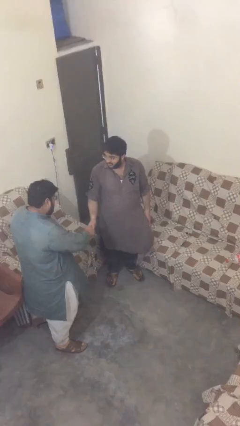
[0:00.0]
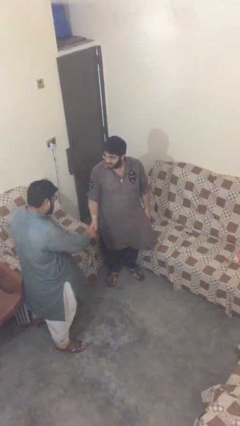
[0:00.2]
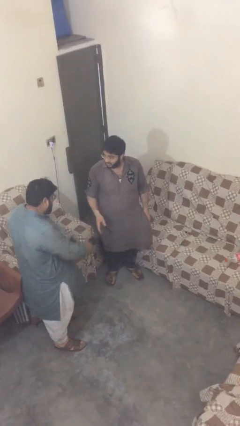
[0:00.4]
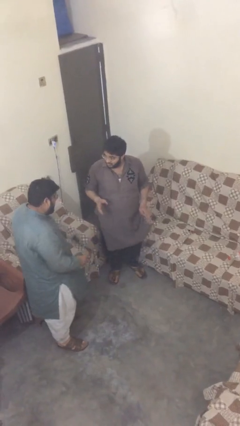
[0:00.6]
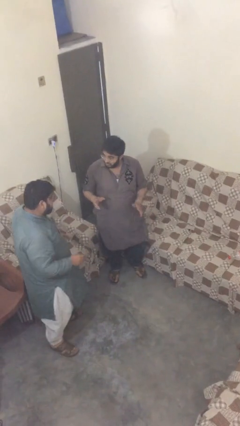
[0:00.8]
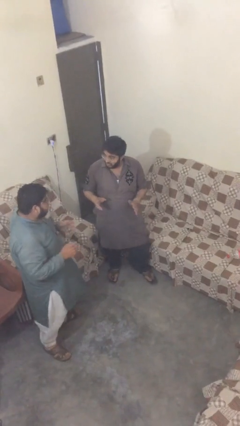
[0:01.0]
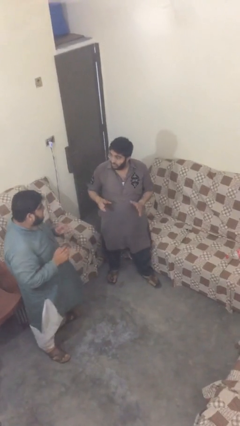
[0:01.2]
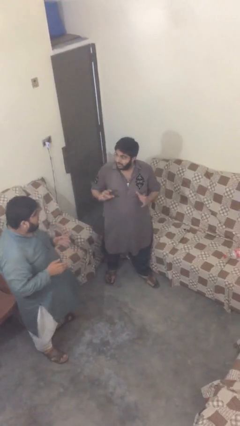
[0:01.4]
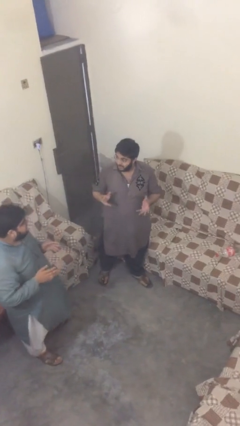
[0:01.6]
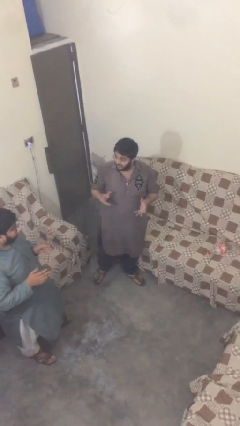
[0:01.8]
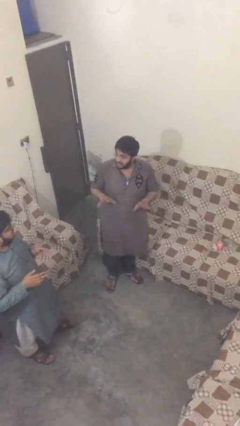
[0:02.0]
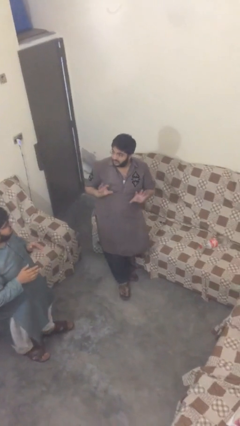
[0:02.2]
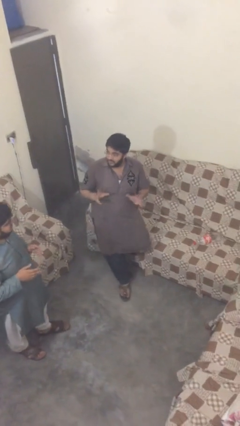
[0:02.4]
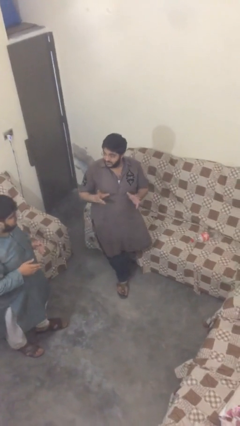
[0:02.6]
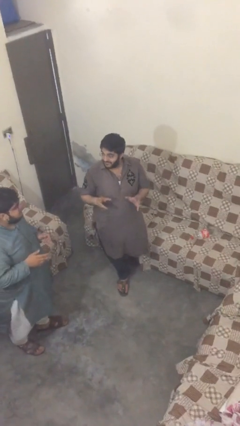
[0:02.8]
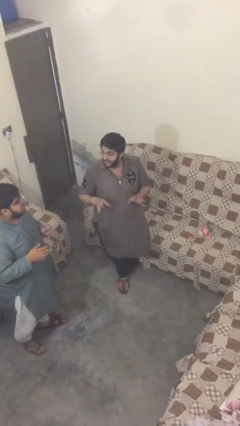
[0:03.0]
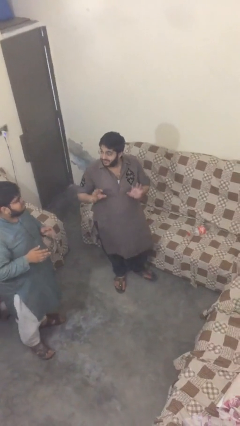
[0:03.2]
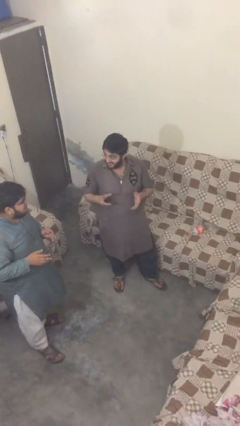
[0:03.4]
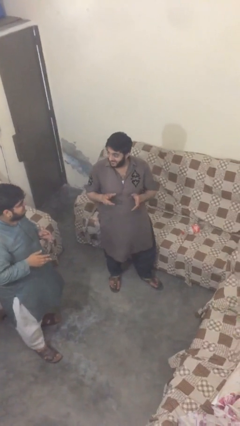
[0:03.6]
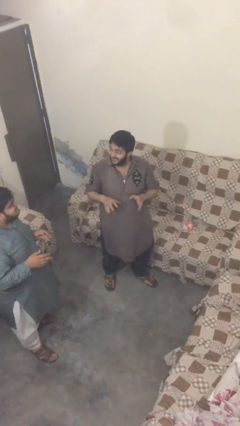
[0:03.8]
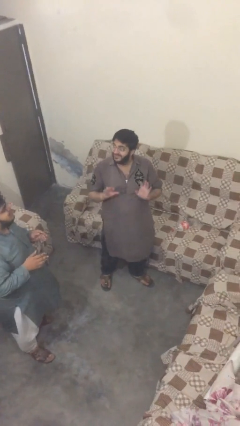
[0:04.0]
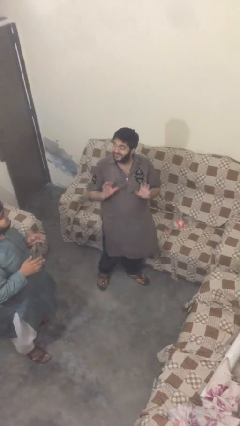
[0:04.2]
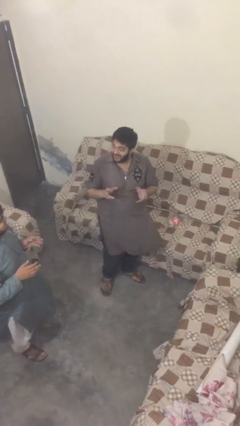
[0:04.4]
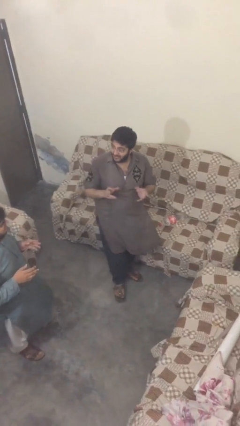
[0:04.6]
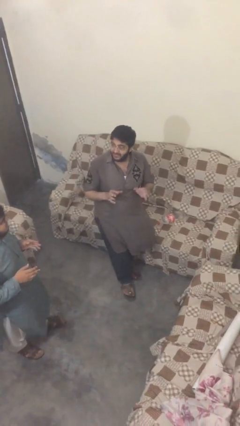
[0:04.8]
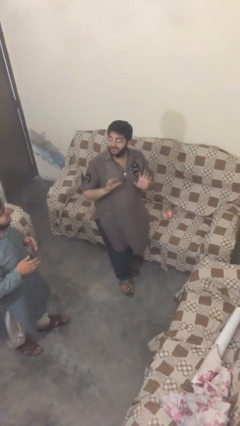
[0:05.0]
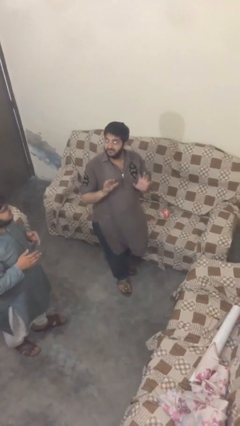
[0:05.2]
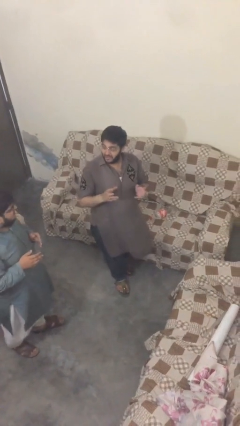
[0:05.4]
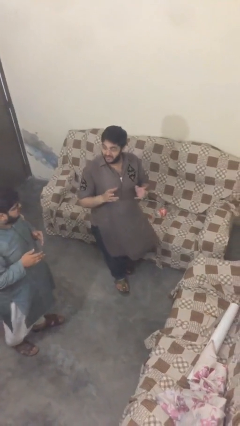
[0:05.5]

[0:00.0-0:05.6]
person talks to person

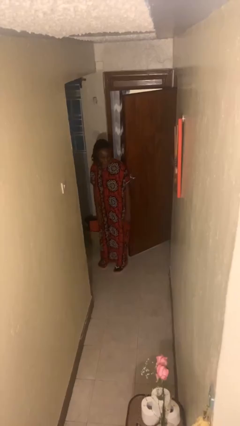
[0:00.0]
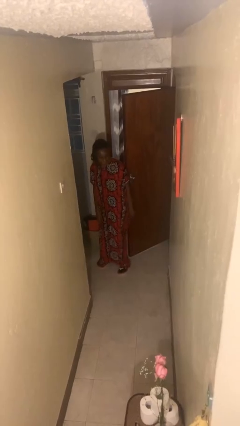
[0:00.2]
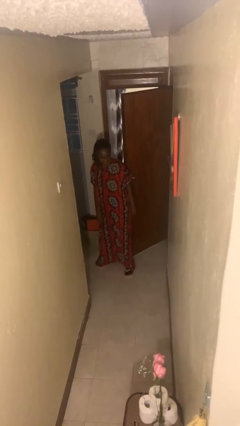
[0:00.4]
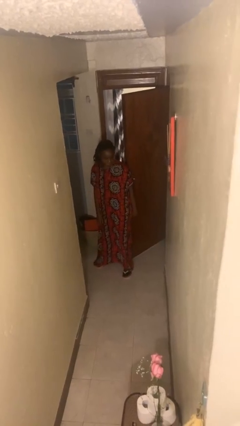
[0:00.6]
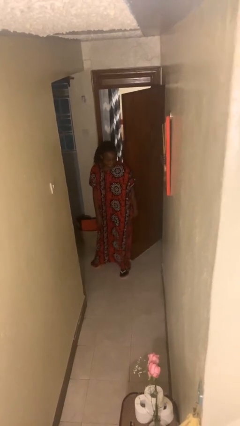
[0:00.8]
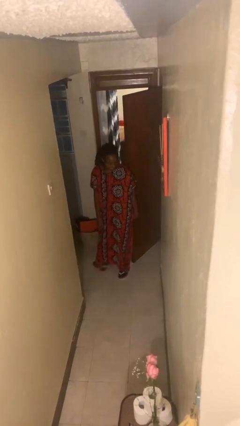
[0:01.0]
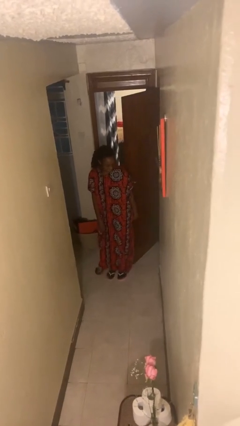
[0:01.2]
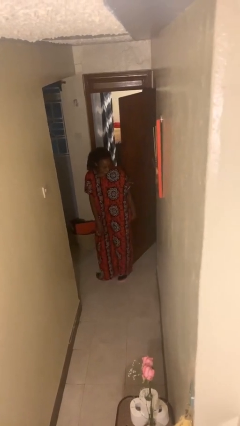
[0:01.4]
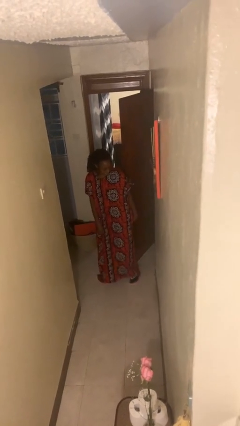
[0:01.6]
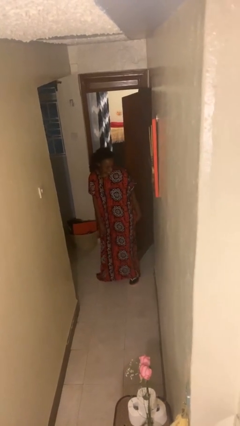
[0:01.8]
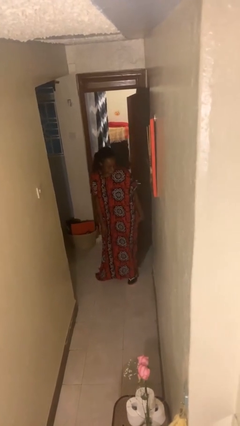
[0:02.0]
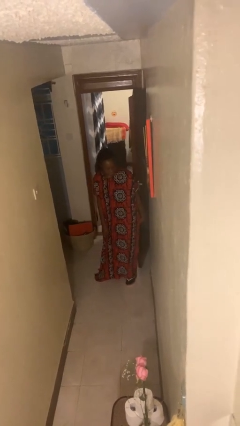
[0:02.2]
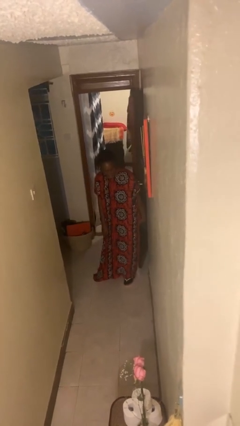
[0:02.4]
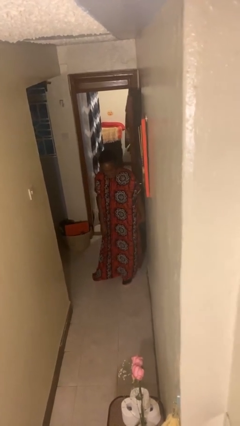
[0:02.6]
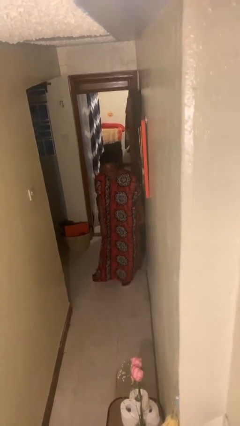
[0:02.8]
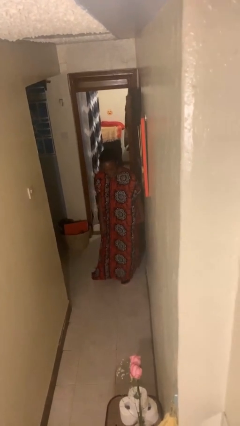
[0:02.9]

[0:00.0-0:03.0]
person closes door with hip

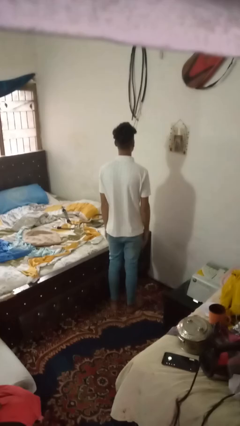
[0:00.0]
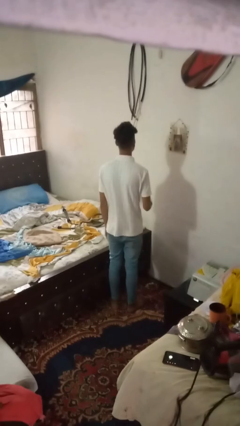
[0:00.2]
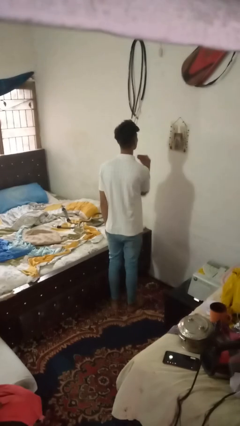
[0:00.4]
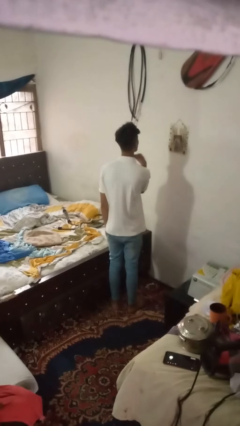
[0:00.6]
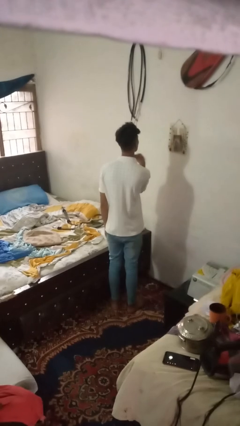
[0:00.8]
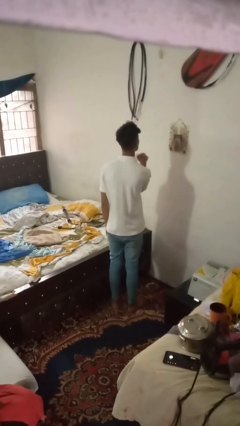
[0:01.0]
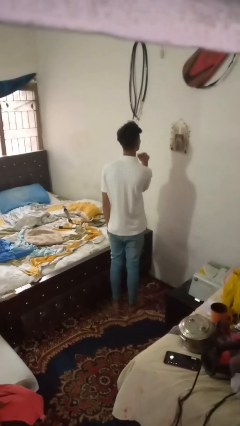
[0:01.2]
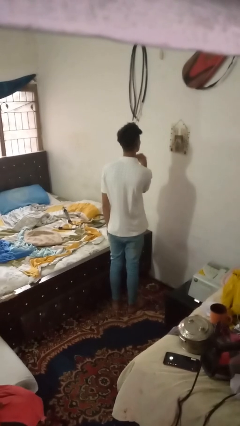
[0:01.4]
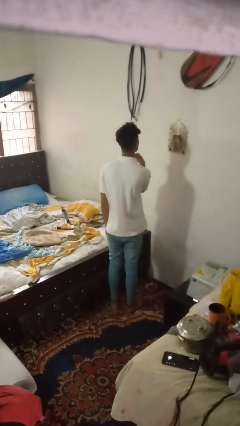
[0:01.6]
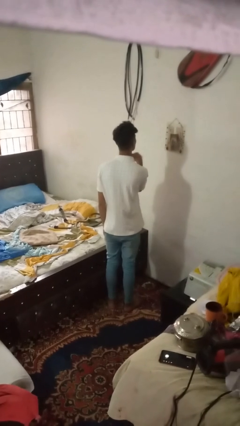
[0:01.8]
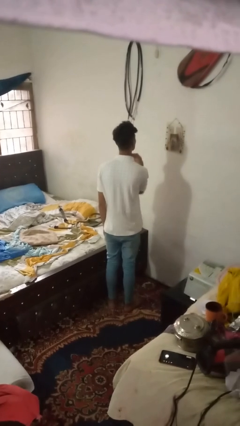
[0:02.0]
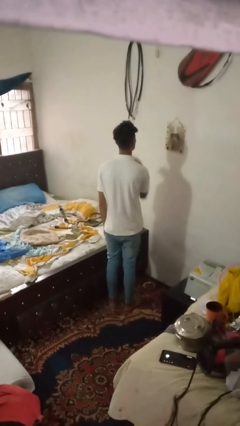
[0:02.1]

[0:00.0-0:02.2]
person gestures cut

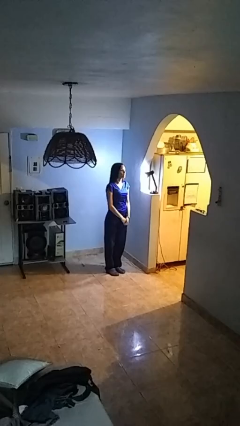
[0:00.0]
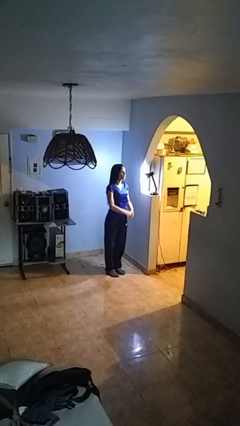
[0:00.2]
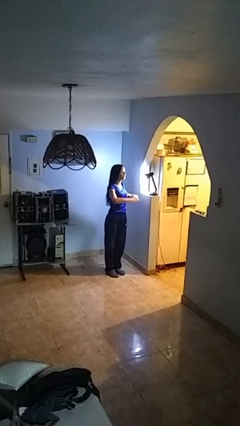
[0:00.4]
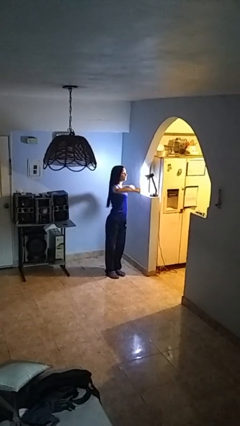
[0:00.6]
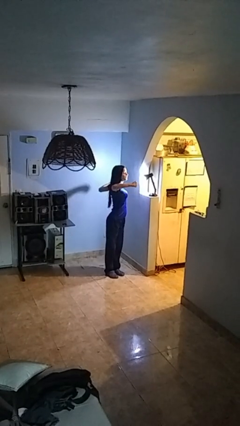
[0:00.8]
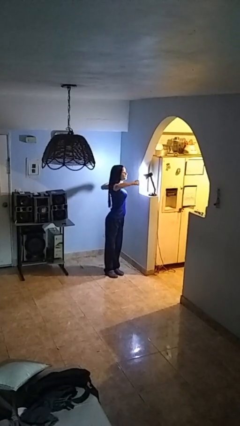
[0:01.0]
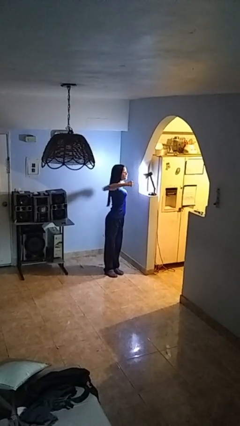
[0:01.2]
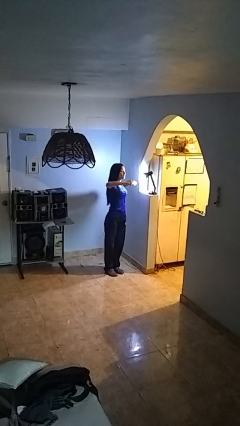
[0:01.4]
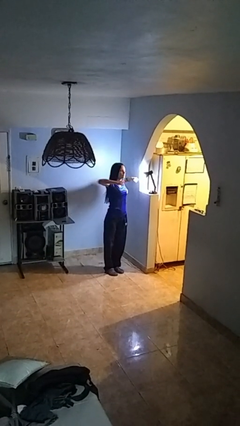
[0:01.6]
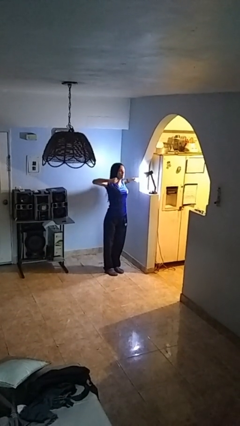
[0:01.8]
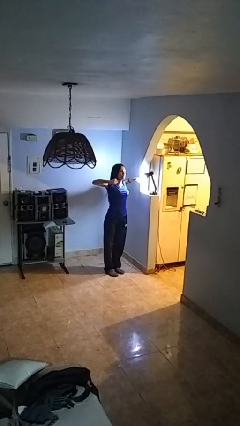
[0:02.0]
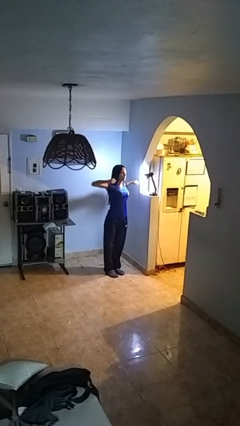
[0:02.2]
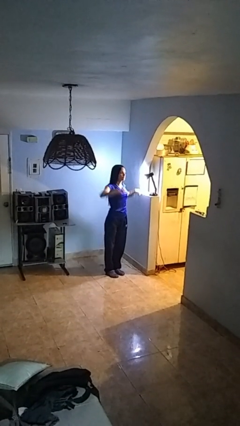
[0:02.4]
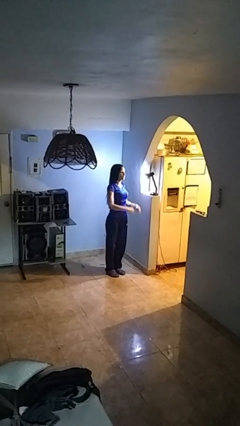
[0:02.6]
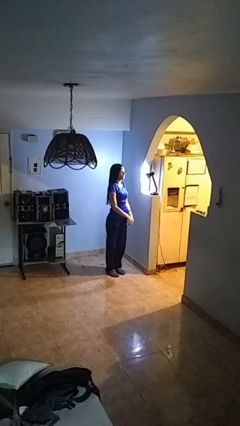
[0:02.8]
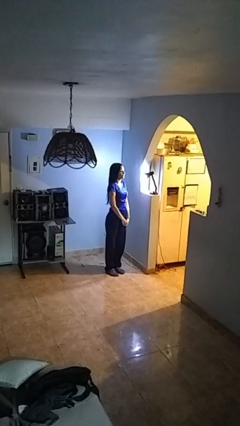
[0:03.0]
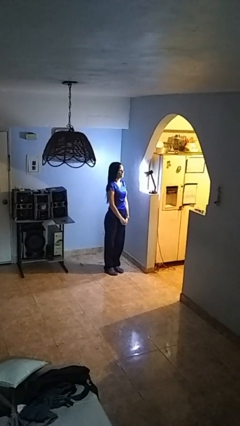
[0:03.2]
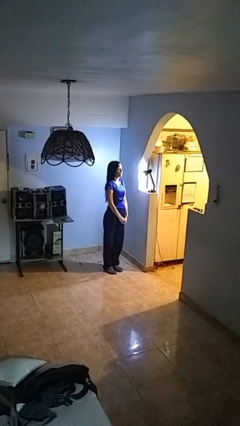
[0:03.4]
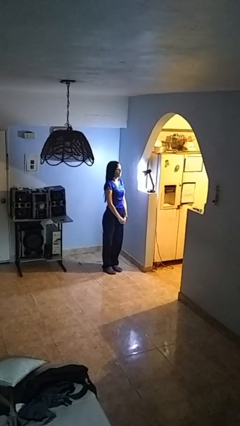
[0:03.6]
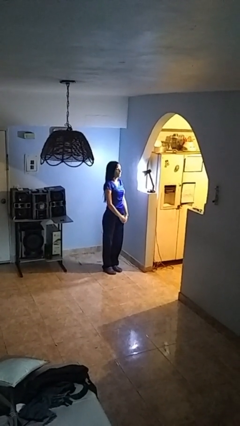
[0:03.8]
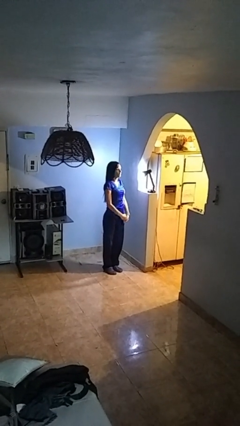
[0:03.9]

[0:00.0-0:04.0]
person stretches arms to side

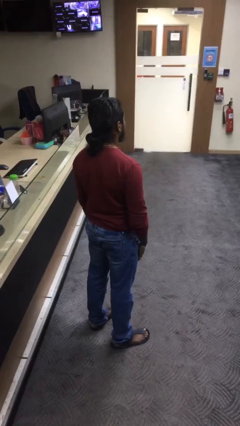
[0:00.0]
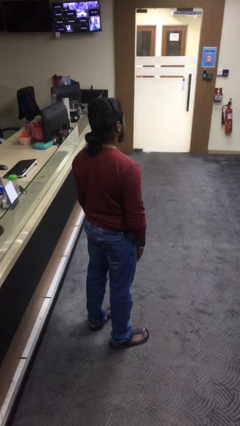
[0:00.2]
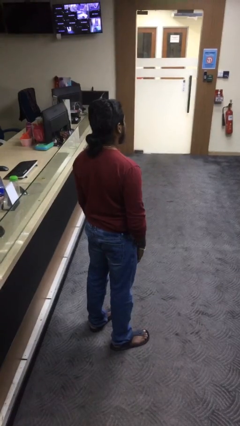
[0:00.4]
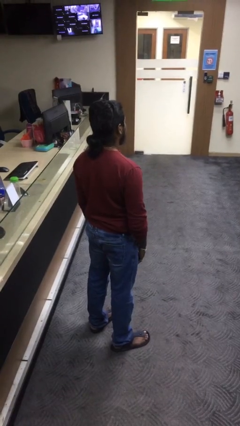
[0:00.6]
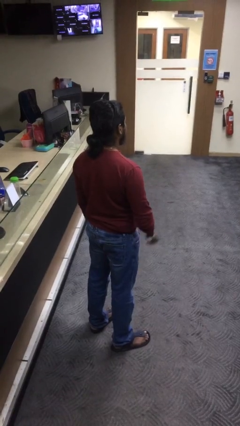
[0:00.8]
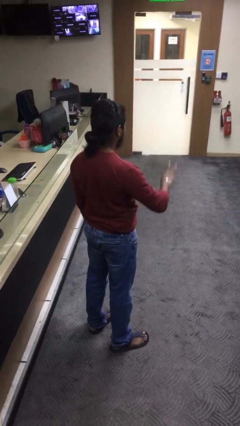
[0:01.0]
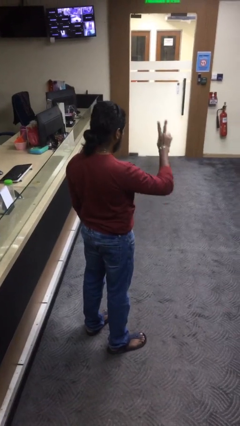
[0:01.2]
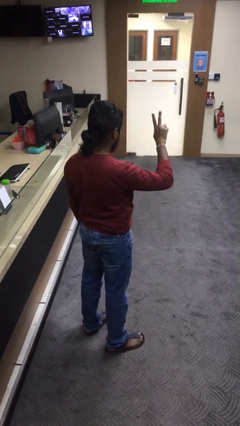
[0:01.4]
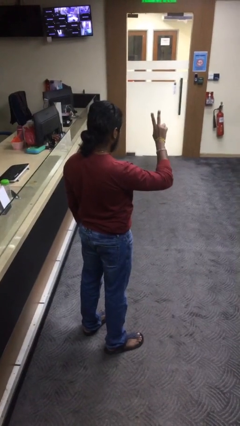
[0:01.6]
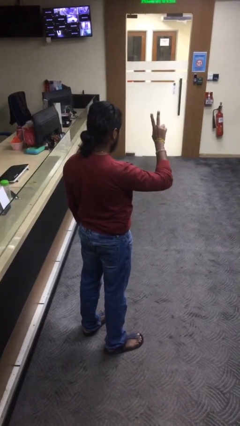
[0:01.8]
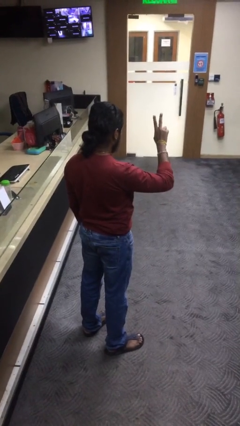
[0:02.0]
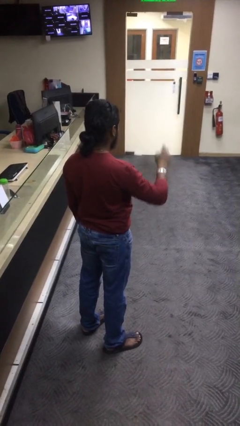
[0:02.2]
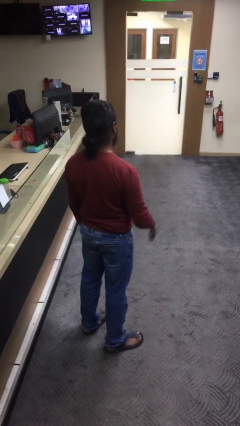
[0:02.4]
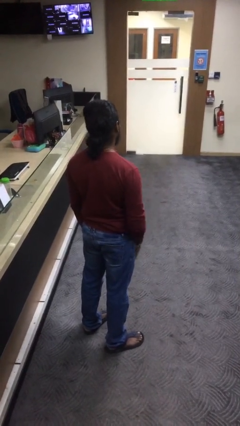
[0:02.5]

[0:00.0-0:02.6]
person gestures peace
